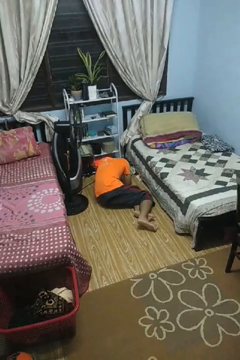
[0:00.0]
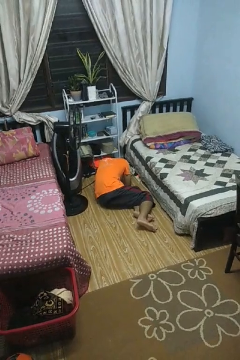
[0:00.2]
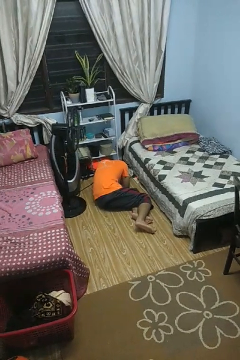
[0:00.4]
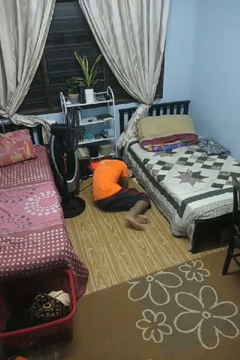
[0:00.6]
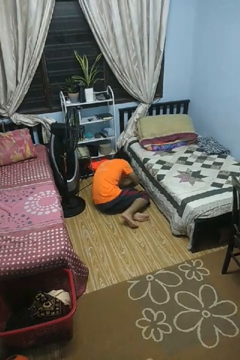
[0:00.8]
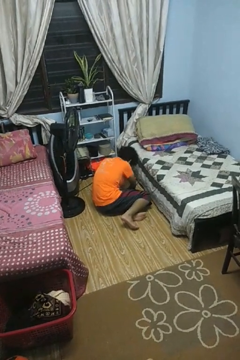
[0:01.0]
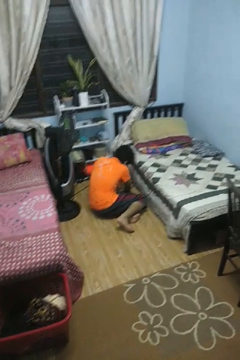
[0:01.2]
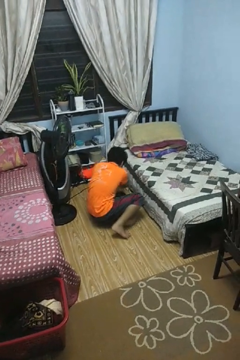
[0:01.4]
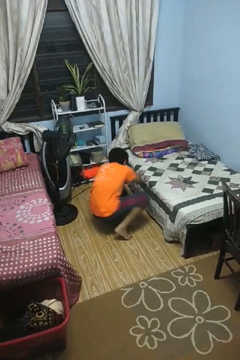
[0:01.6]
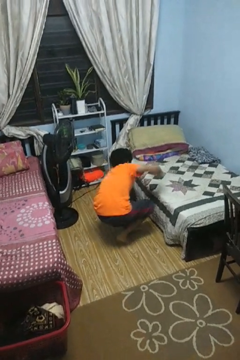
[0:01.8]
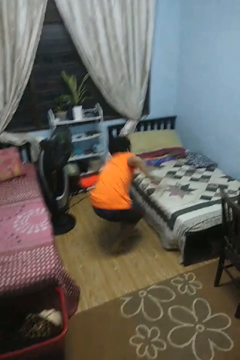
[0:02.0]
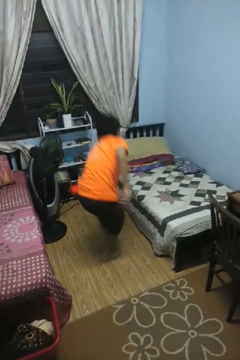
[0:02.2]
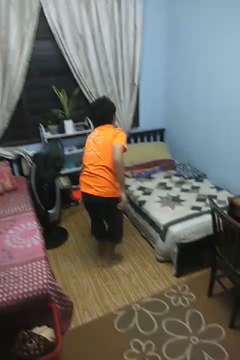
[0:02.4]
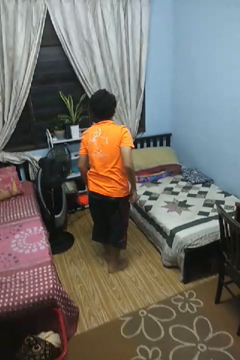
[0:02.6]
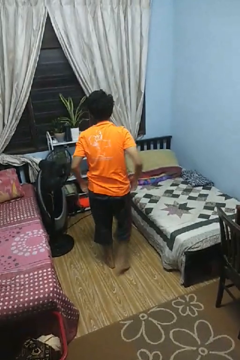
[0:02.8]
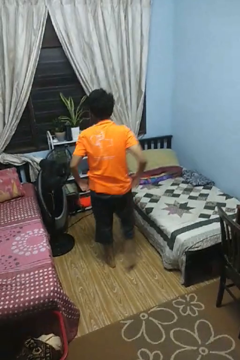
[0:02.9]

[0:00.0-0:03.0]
person stands up from floor

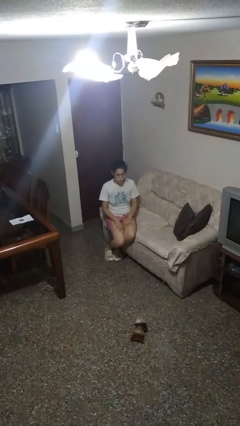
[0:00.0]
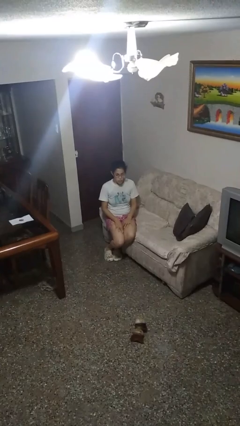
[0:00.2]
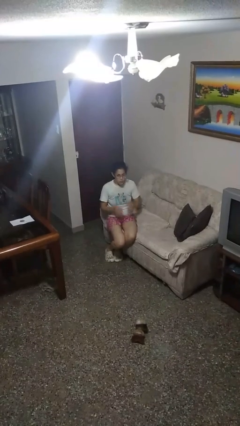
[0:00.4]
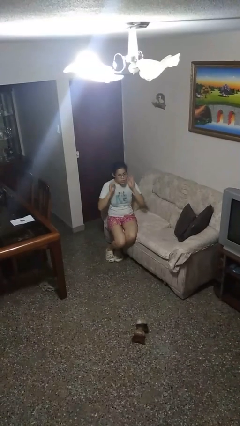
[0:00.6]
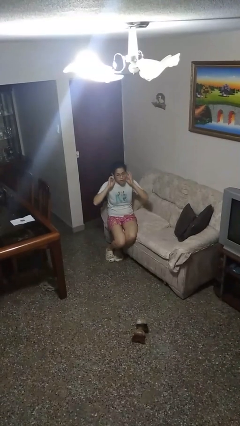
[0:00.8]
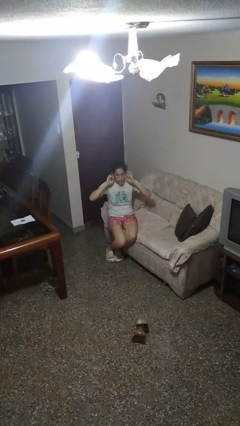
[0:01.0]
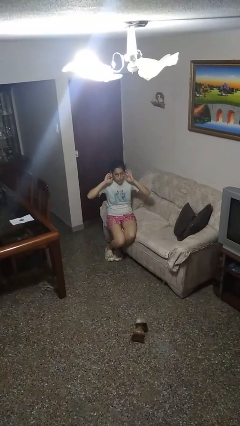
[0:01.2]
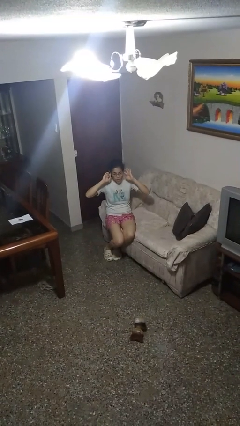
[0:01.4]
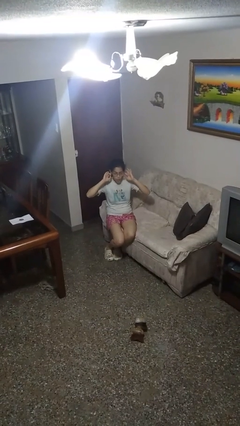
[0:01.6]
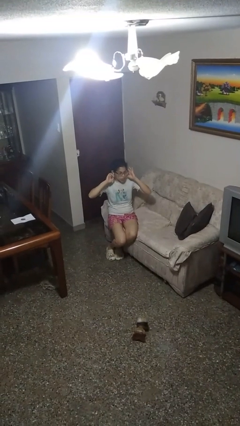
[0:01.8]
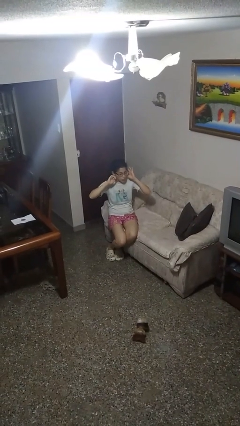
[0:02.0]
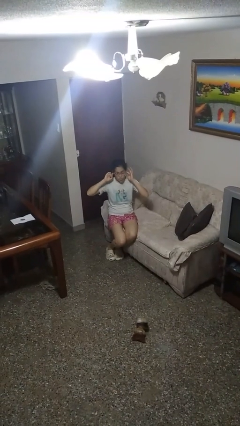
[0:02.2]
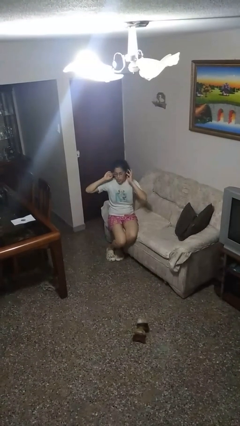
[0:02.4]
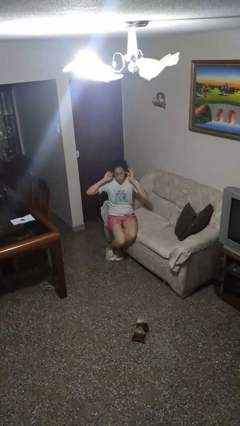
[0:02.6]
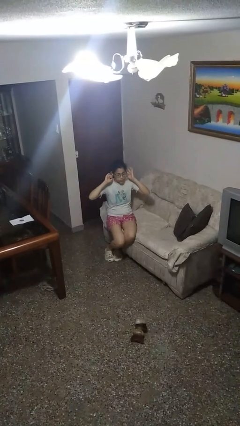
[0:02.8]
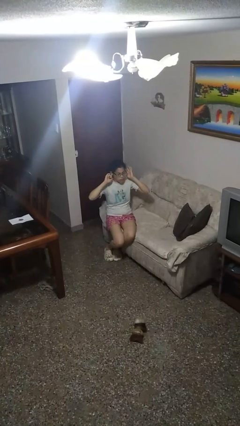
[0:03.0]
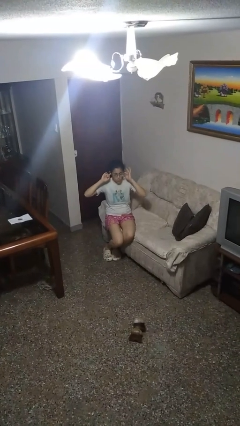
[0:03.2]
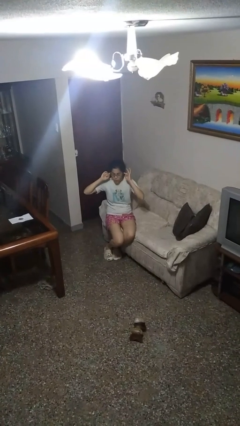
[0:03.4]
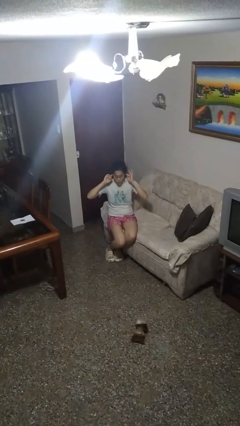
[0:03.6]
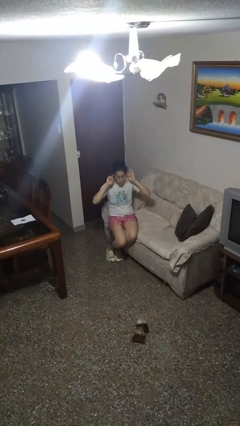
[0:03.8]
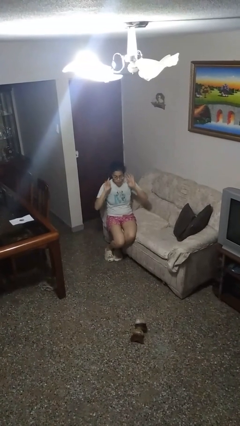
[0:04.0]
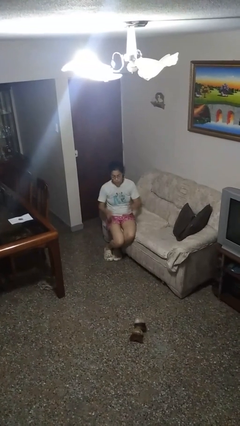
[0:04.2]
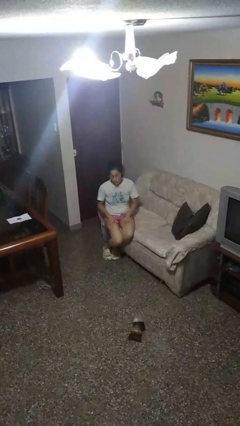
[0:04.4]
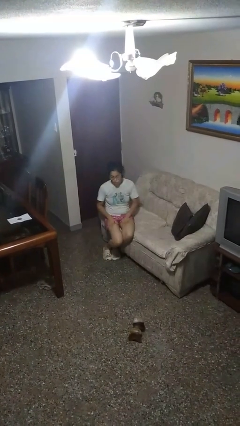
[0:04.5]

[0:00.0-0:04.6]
person puts fingers in ear

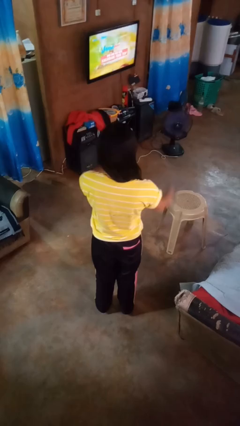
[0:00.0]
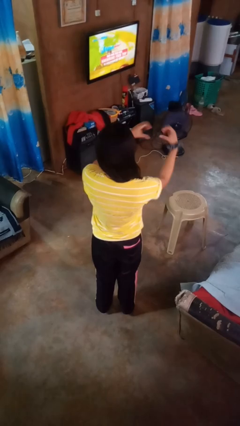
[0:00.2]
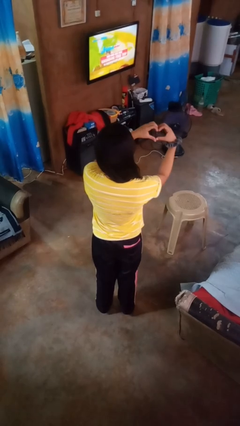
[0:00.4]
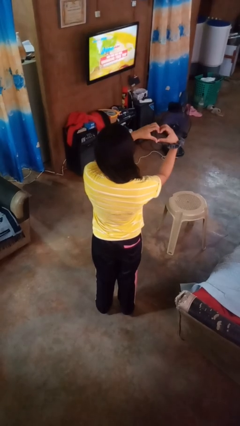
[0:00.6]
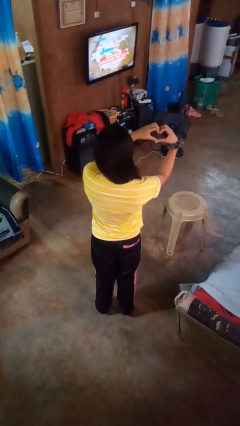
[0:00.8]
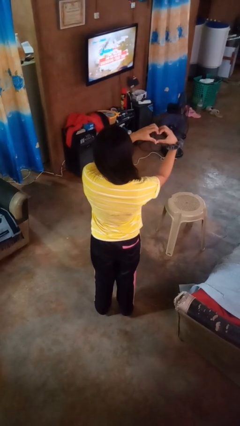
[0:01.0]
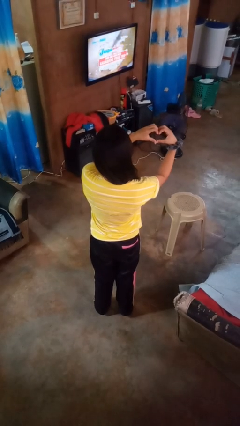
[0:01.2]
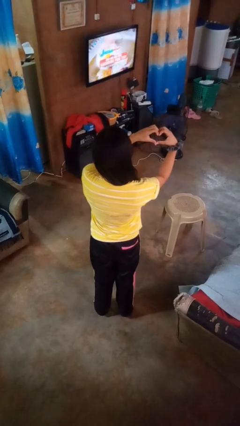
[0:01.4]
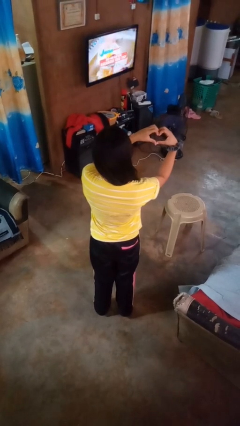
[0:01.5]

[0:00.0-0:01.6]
person gestures heart

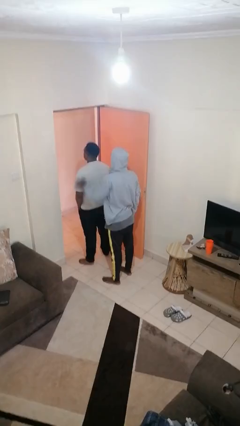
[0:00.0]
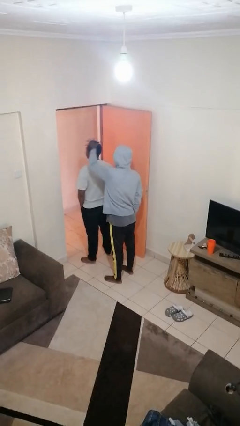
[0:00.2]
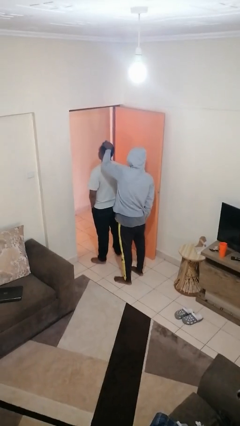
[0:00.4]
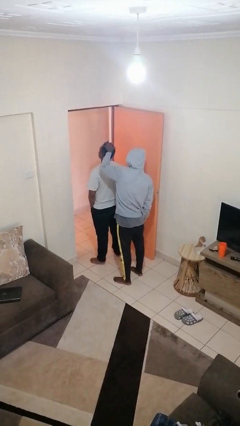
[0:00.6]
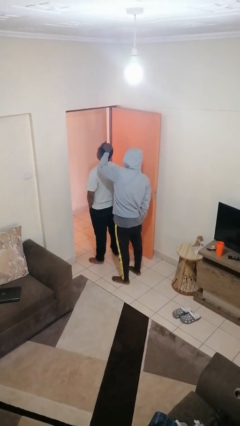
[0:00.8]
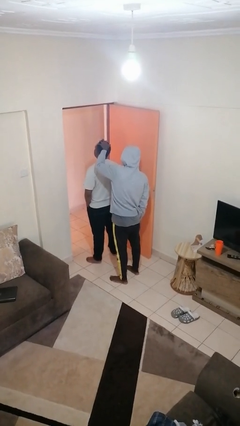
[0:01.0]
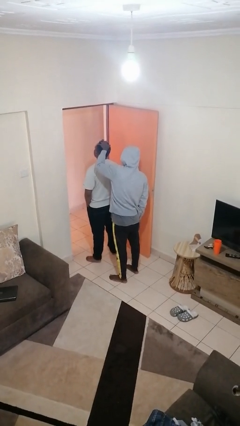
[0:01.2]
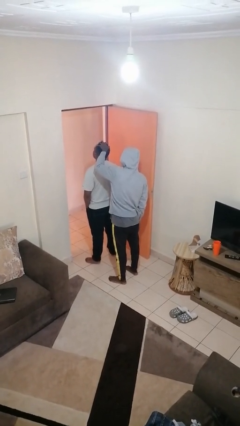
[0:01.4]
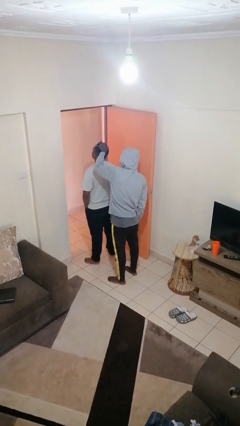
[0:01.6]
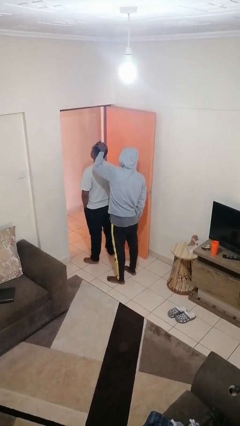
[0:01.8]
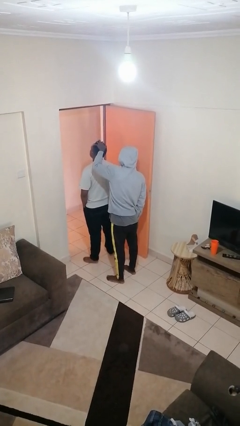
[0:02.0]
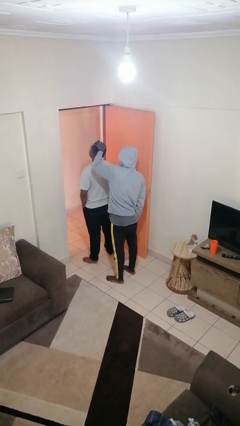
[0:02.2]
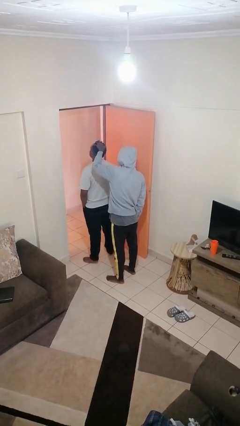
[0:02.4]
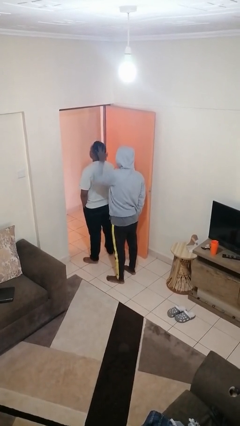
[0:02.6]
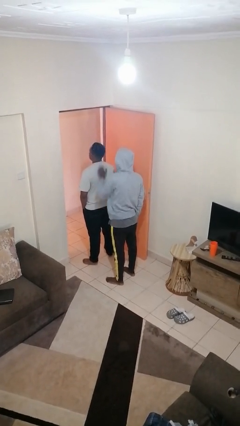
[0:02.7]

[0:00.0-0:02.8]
person grabs person by hair

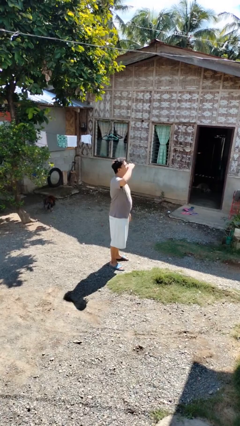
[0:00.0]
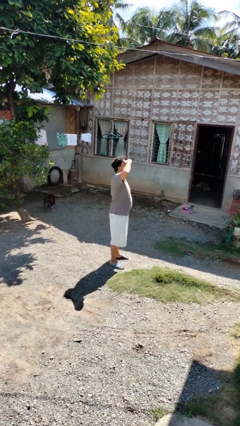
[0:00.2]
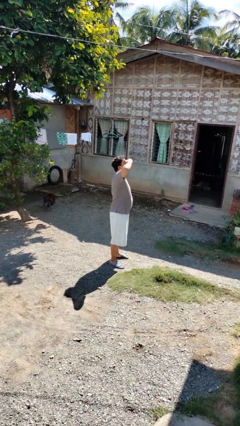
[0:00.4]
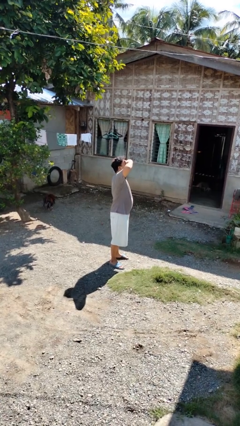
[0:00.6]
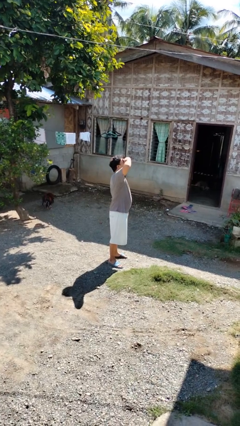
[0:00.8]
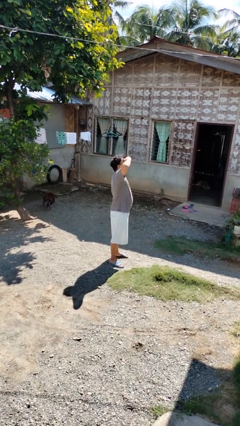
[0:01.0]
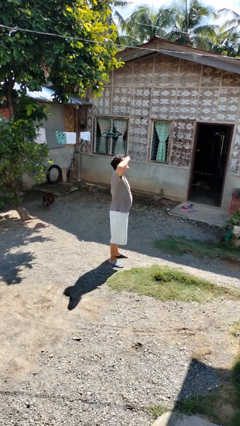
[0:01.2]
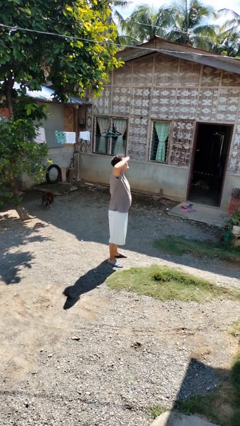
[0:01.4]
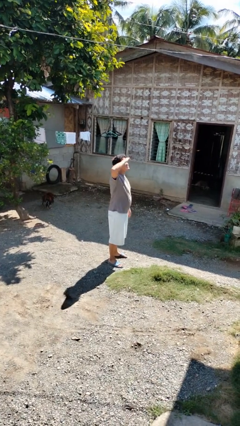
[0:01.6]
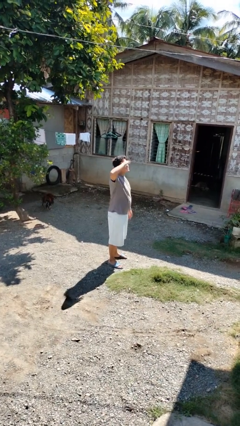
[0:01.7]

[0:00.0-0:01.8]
person shades eyes

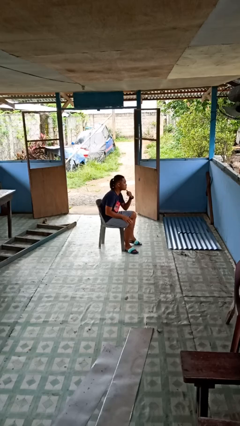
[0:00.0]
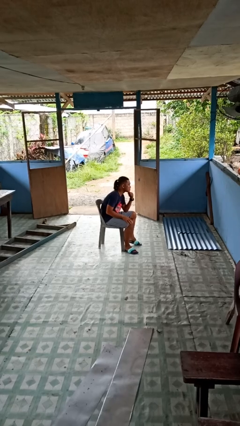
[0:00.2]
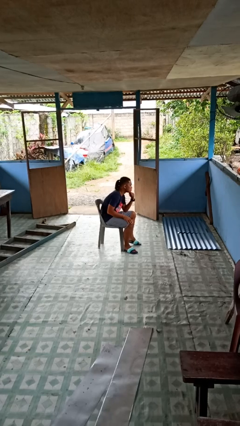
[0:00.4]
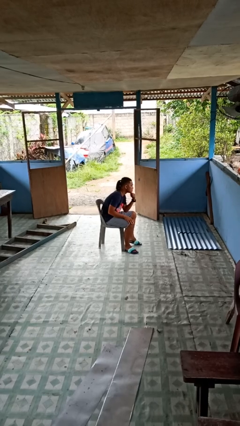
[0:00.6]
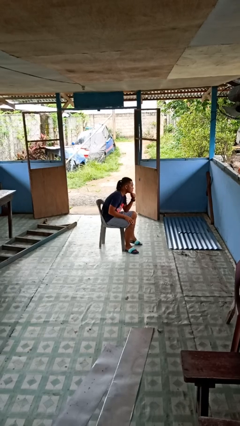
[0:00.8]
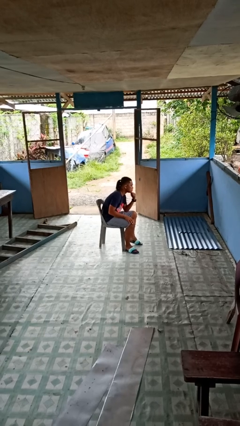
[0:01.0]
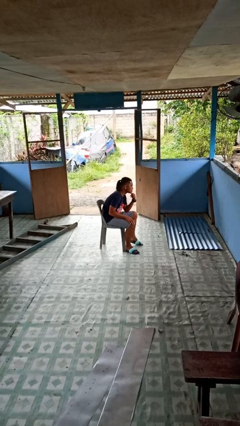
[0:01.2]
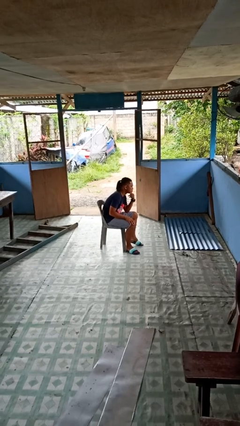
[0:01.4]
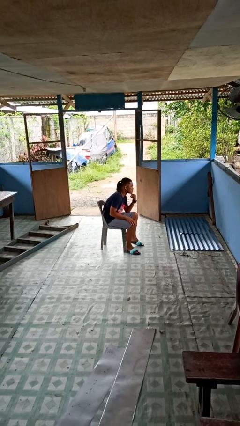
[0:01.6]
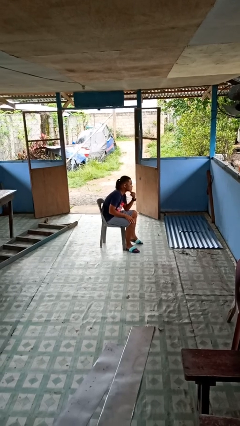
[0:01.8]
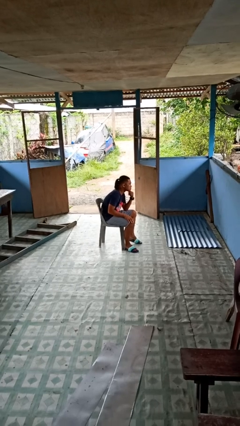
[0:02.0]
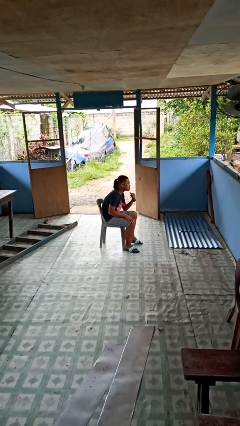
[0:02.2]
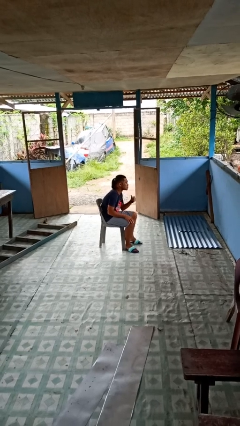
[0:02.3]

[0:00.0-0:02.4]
person strokes chin

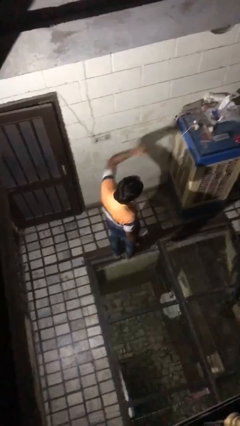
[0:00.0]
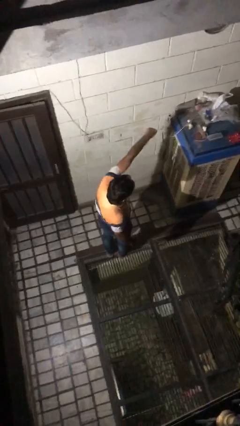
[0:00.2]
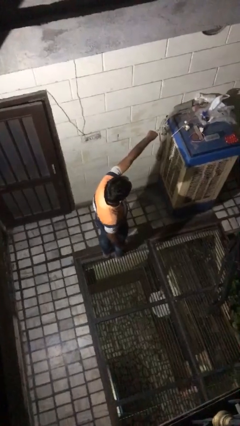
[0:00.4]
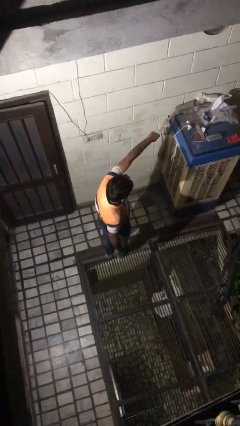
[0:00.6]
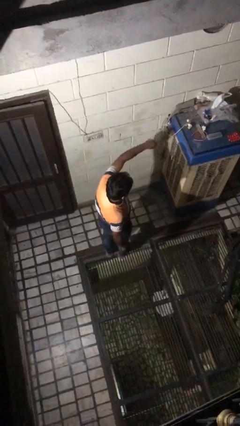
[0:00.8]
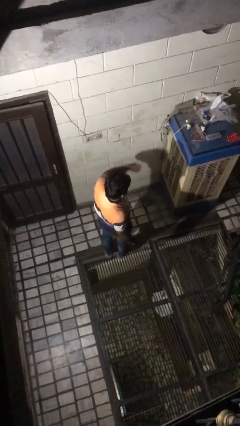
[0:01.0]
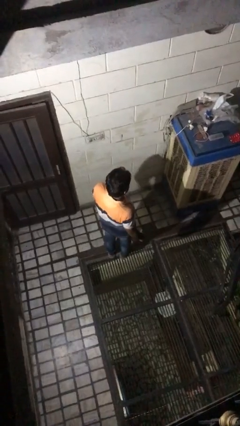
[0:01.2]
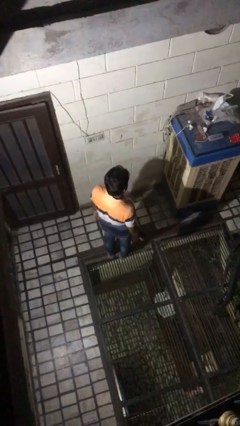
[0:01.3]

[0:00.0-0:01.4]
person punches

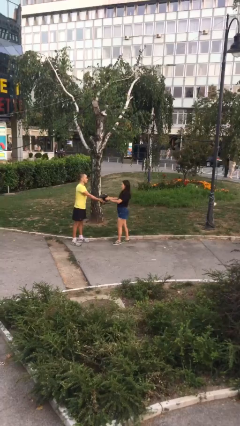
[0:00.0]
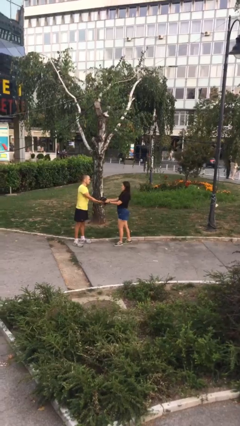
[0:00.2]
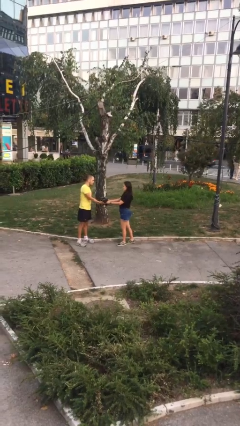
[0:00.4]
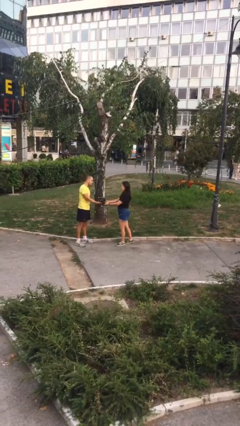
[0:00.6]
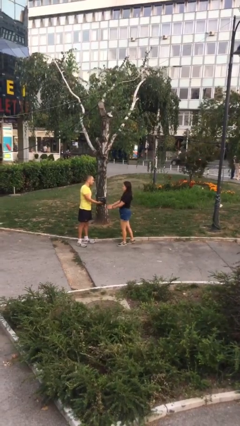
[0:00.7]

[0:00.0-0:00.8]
person transfers object to person
